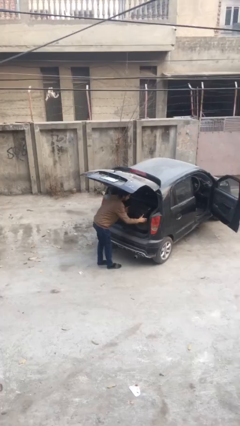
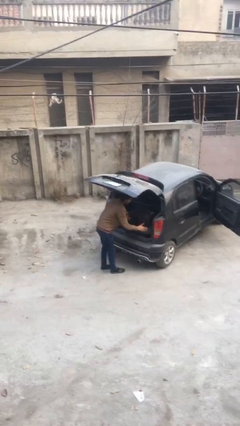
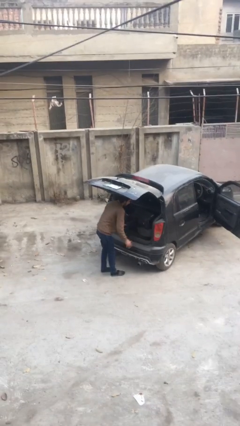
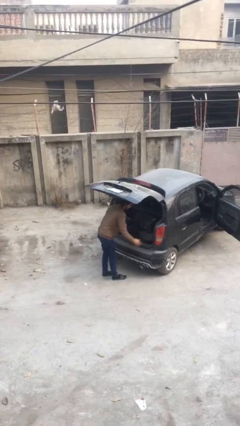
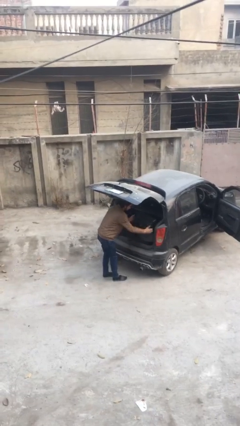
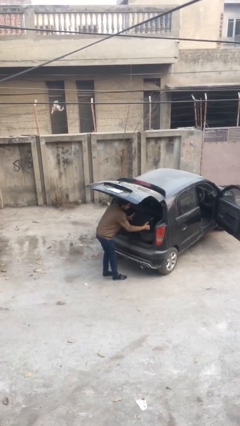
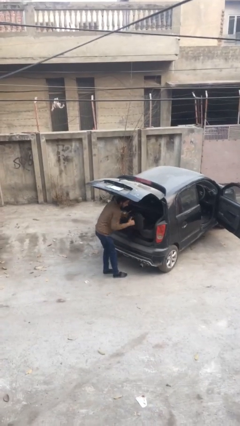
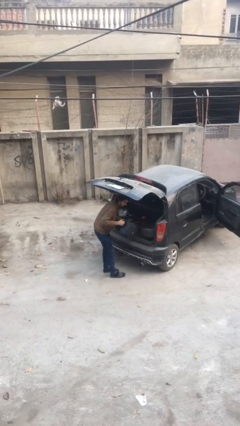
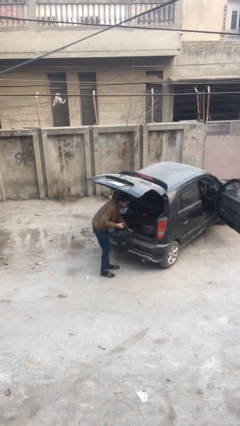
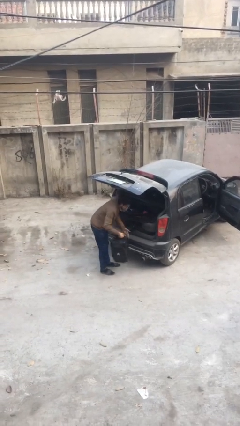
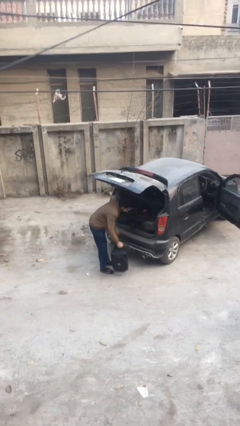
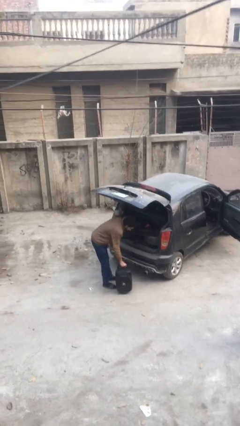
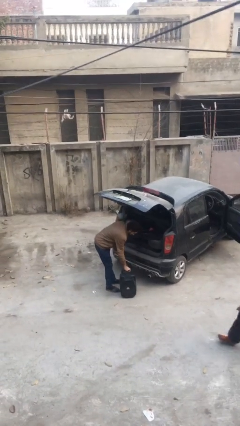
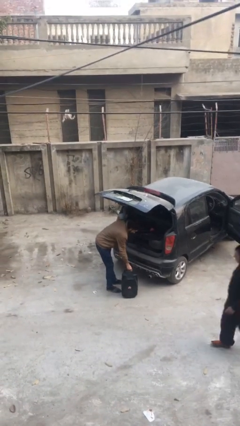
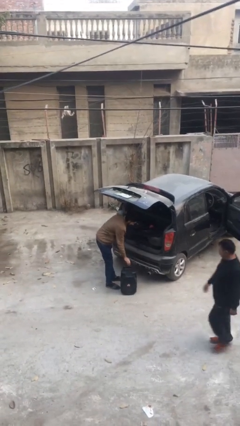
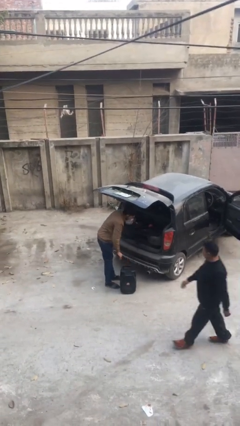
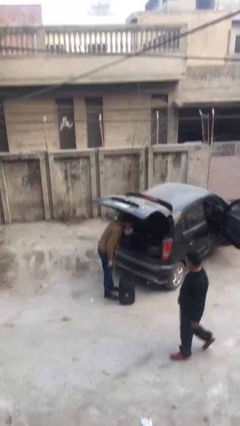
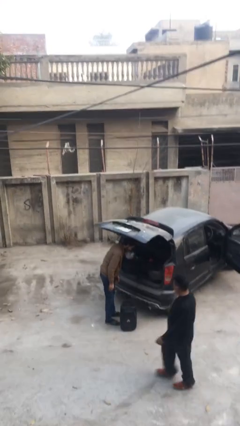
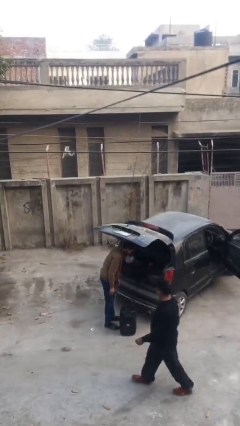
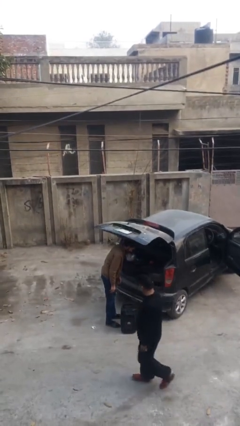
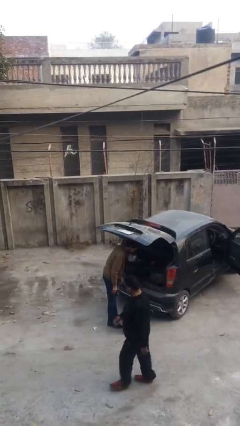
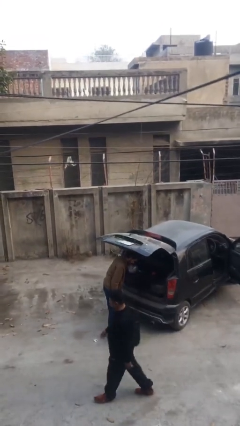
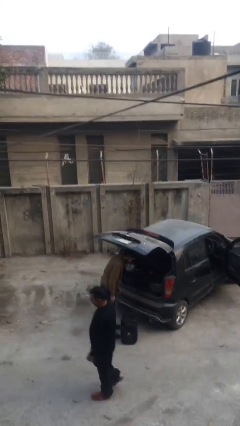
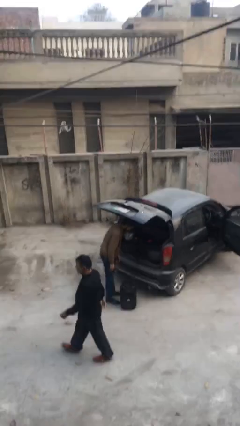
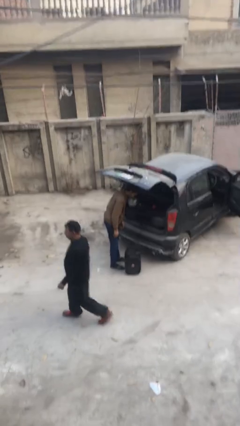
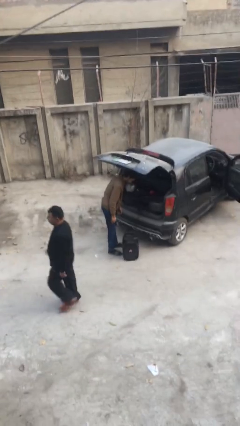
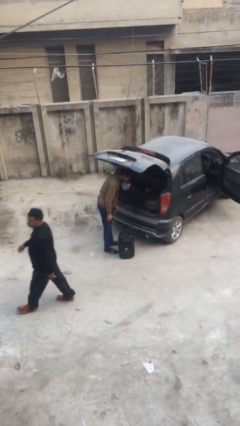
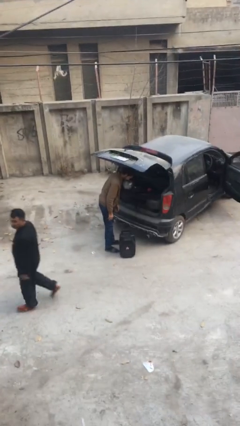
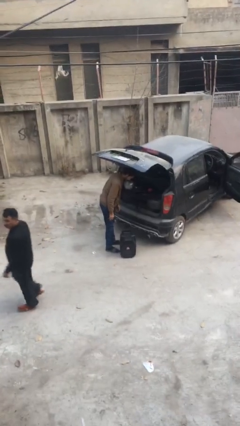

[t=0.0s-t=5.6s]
person unloads car

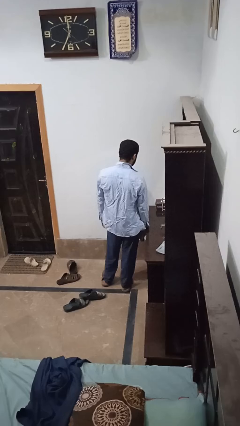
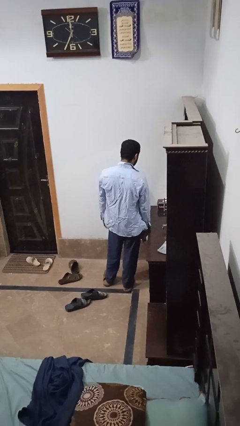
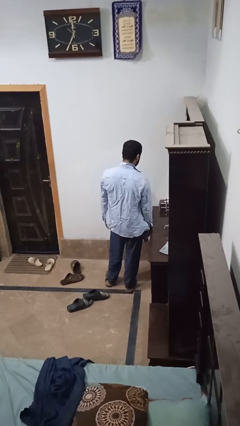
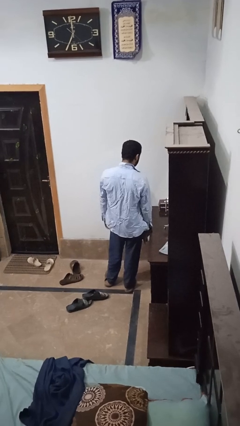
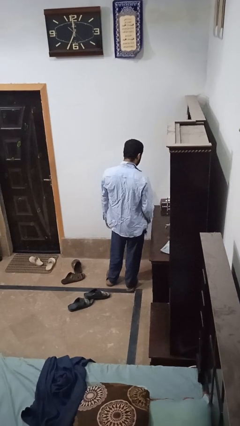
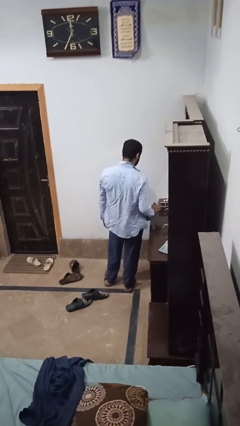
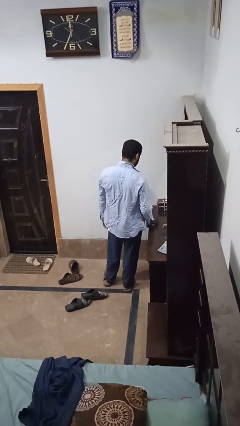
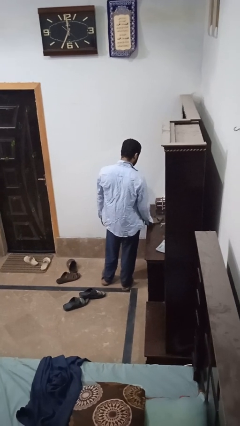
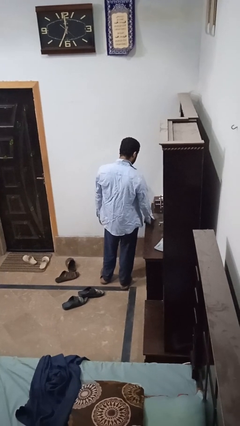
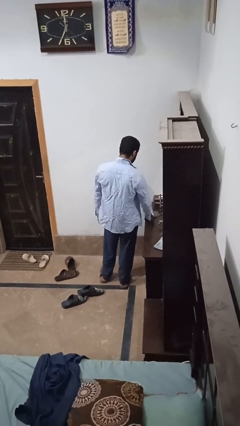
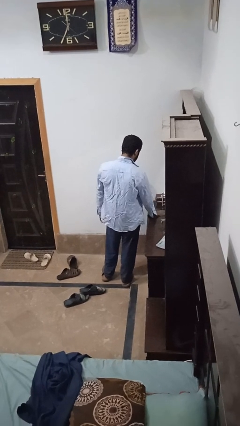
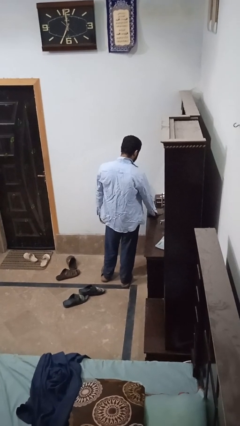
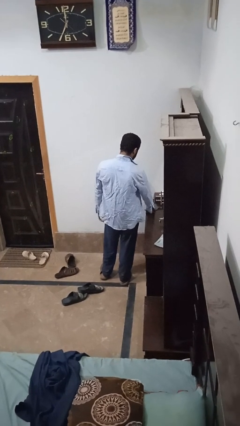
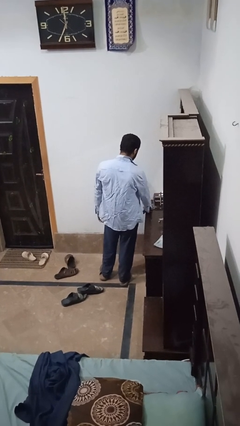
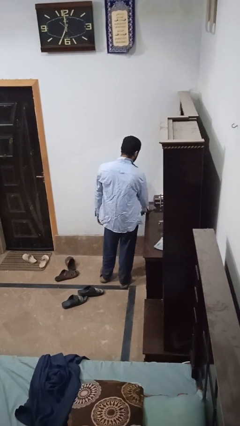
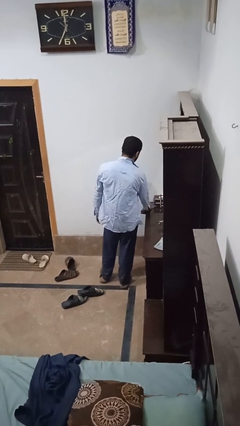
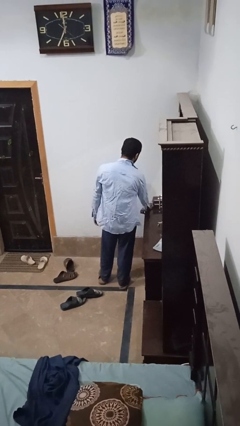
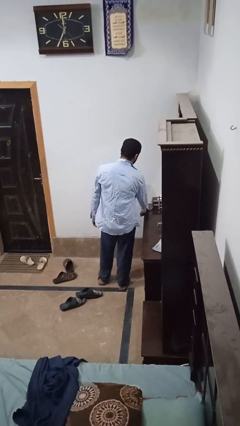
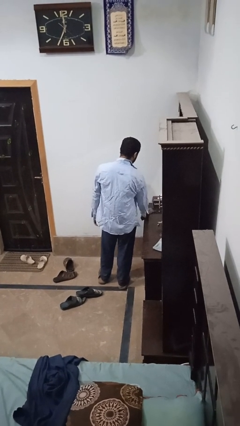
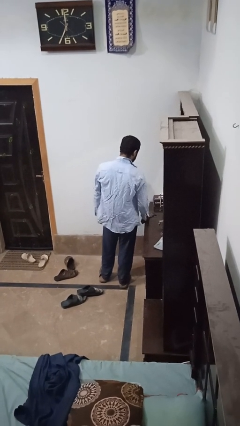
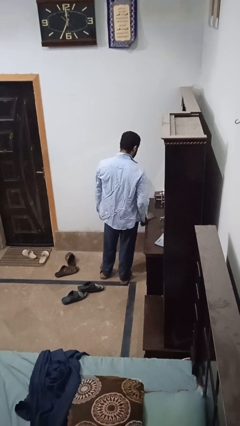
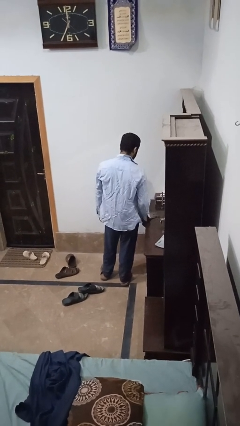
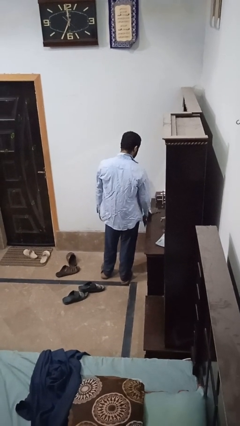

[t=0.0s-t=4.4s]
person cleans table with rag

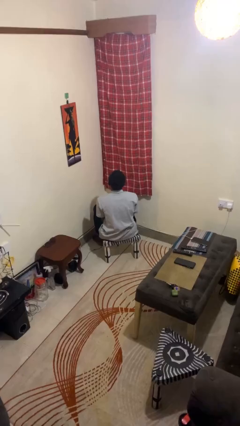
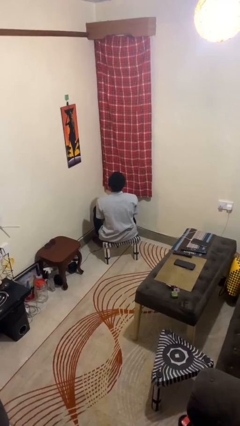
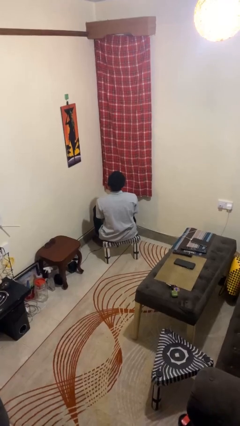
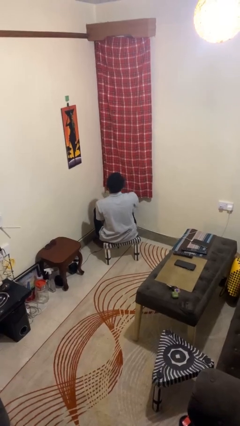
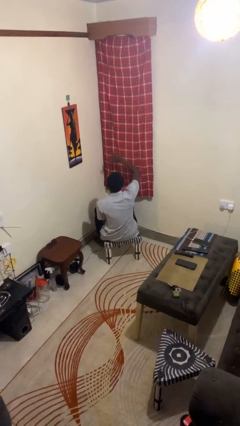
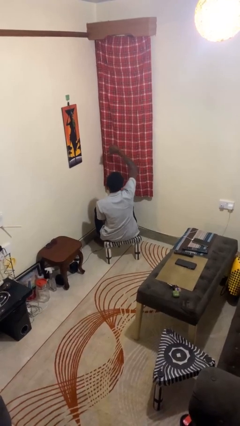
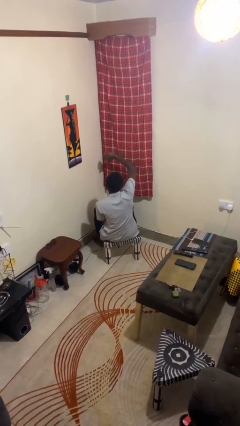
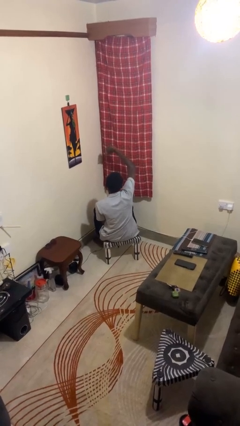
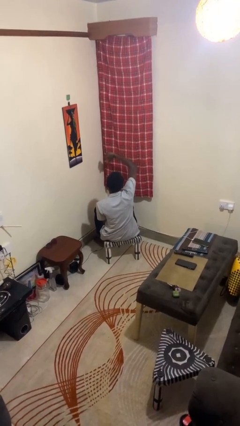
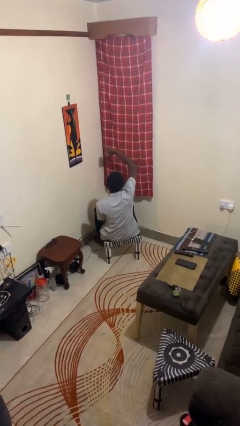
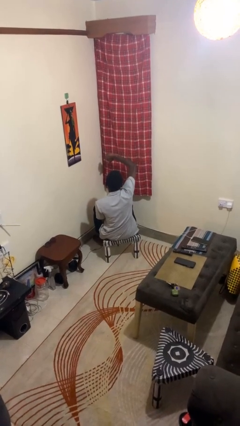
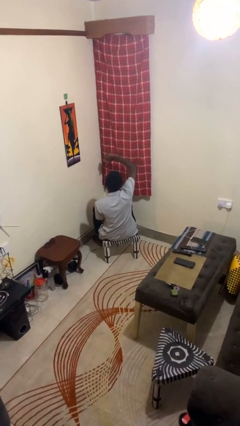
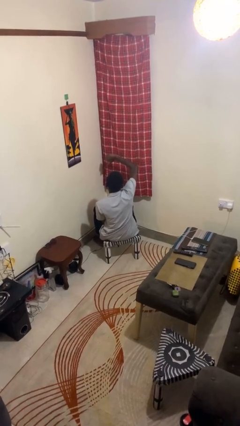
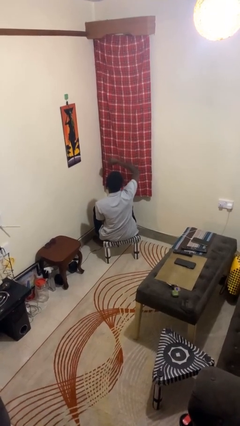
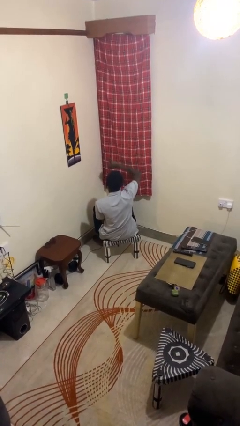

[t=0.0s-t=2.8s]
person gestures thumbs down

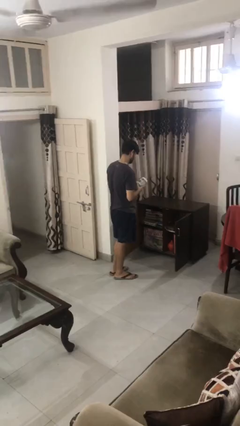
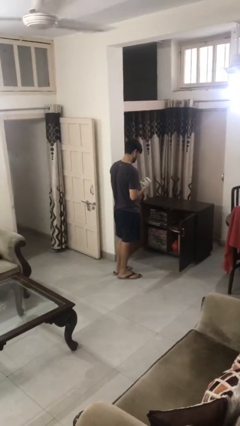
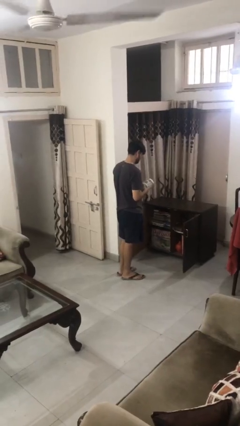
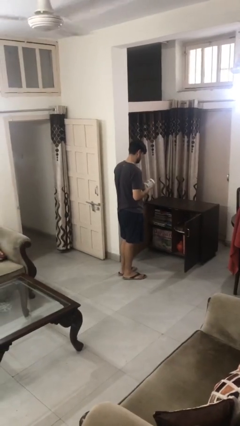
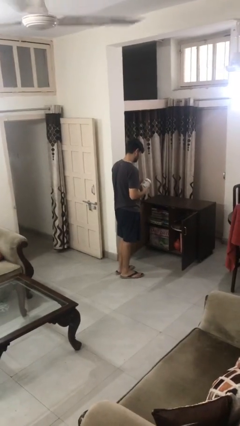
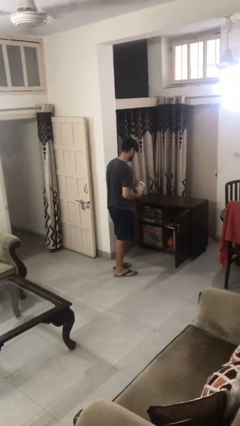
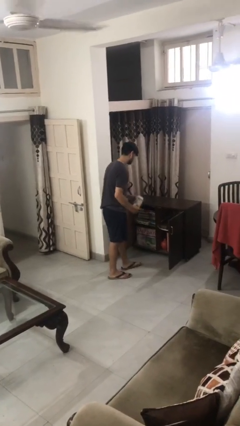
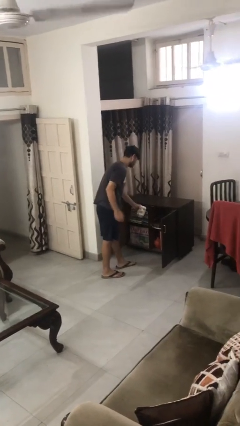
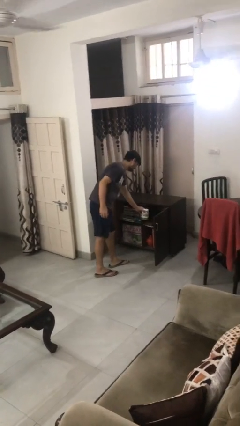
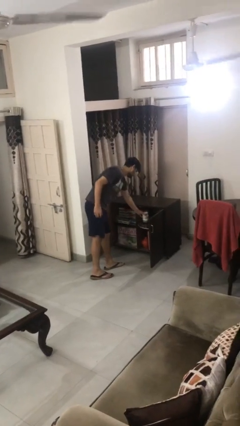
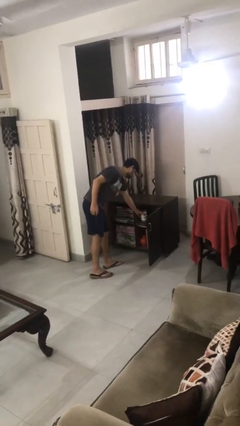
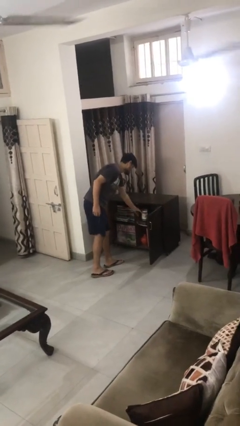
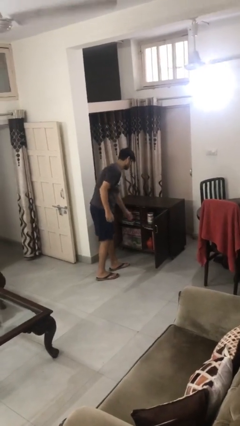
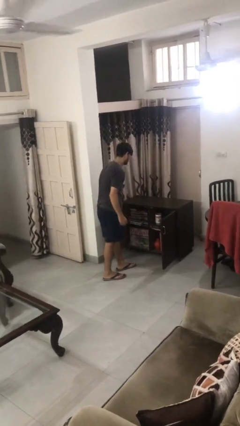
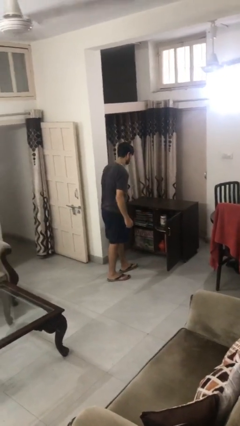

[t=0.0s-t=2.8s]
person puts down object into cabinet

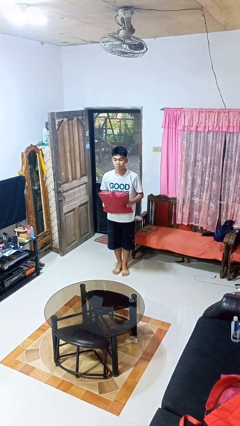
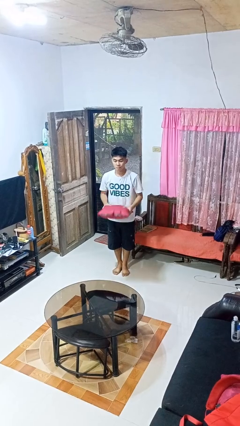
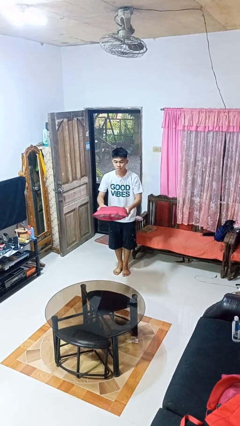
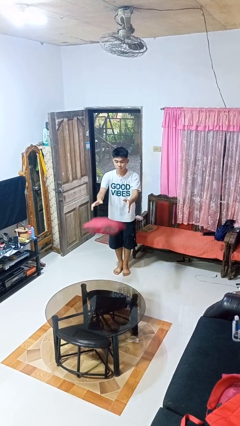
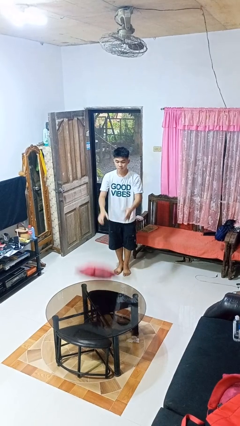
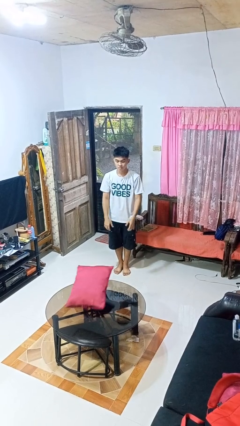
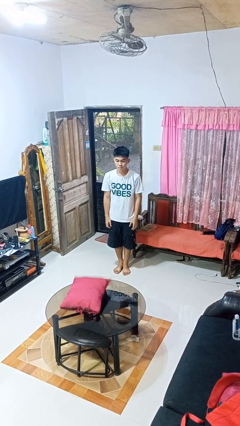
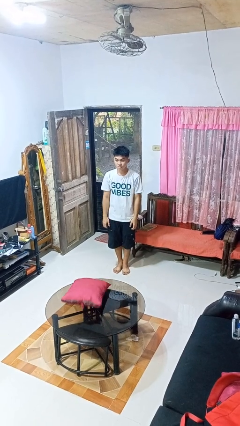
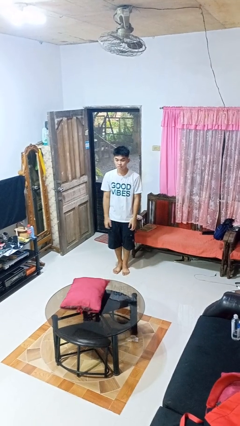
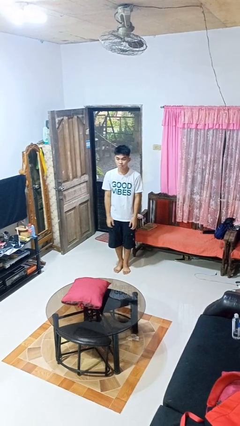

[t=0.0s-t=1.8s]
person throws object on table

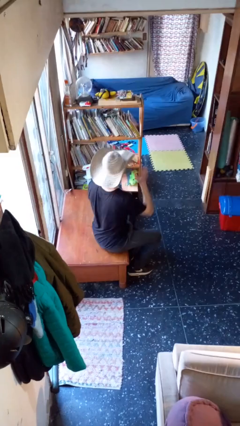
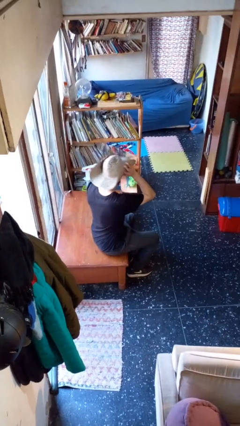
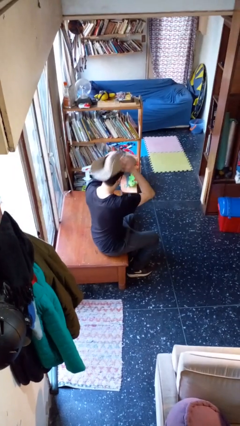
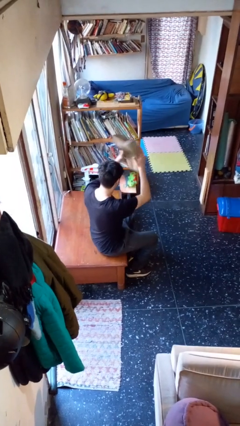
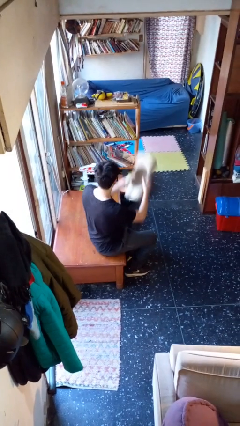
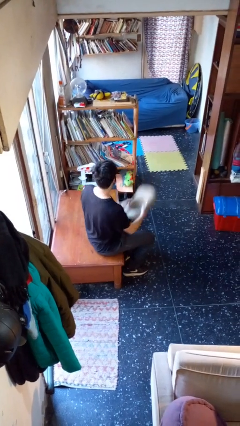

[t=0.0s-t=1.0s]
person takes off hat
